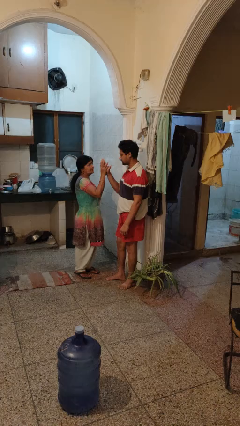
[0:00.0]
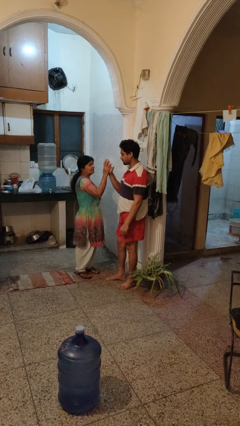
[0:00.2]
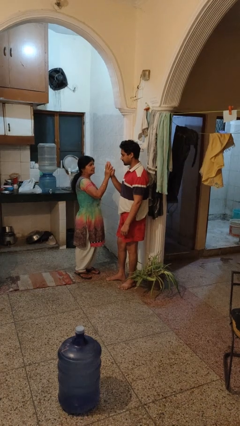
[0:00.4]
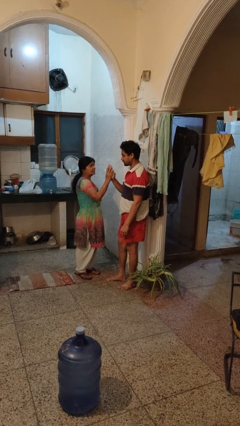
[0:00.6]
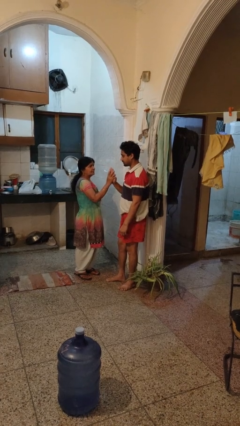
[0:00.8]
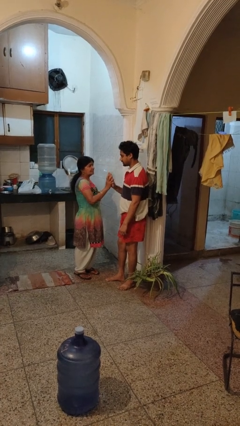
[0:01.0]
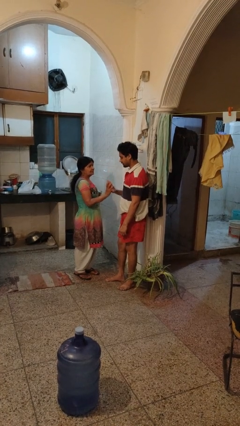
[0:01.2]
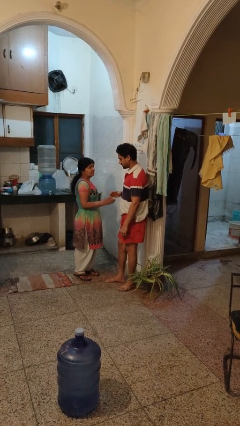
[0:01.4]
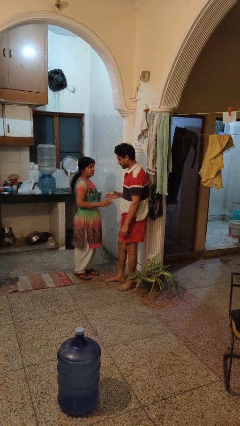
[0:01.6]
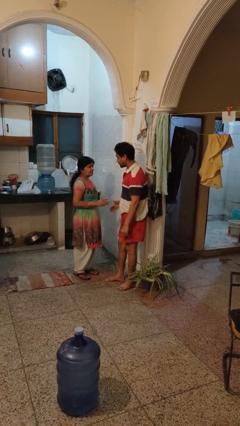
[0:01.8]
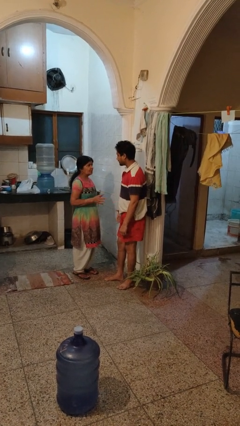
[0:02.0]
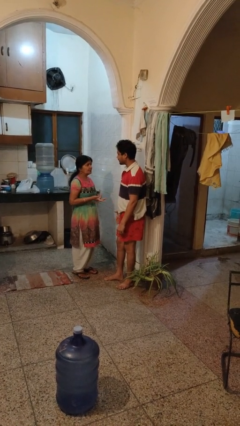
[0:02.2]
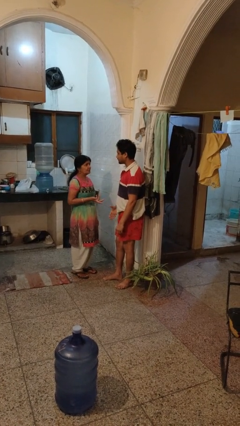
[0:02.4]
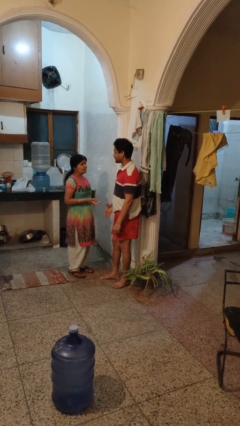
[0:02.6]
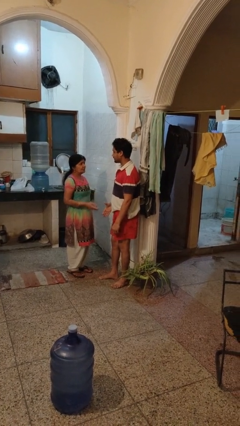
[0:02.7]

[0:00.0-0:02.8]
person highfives hand

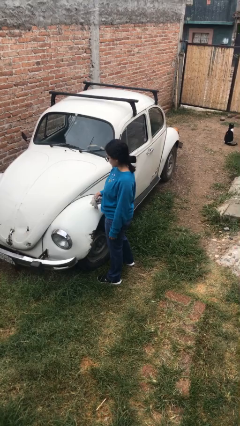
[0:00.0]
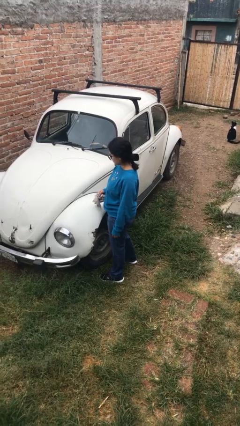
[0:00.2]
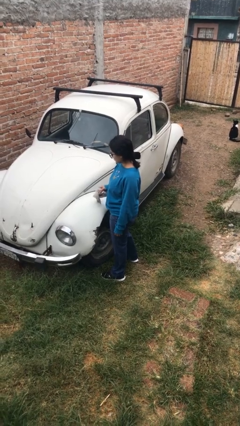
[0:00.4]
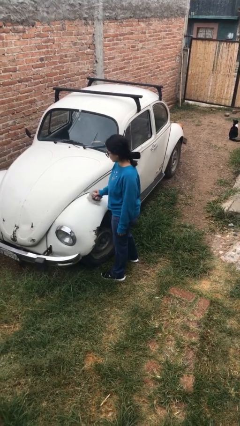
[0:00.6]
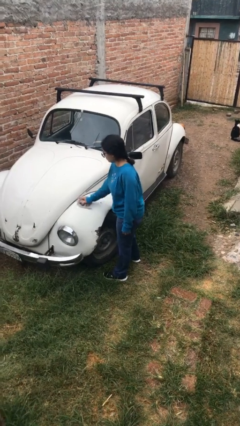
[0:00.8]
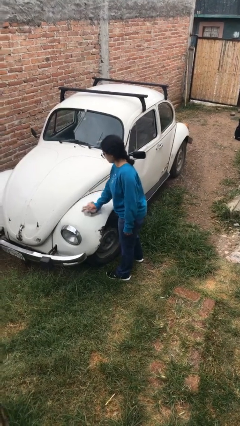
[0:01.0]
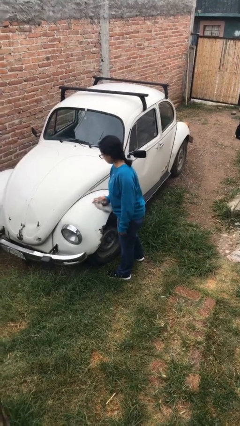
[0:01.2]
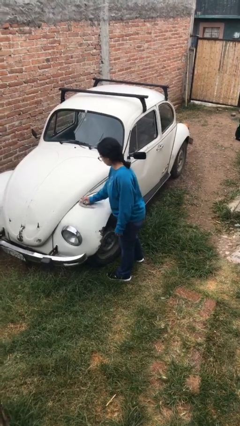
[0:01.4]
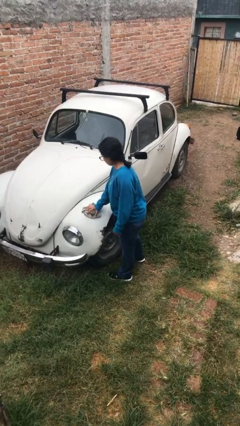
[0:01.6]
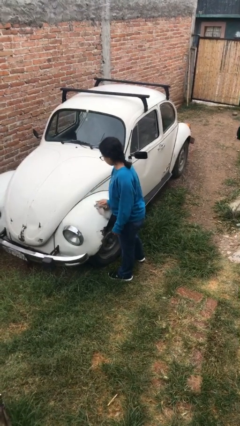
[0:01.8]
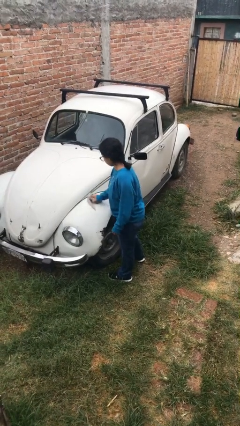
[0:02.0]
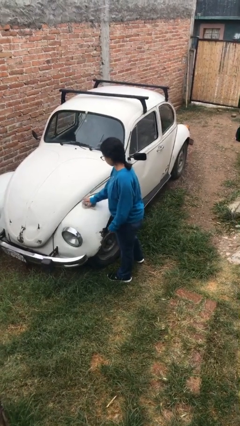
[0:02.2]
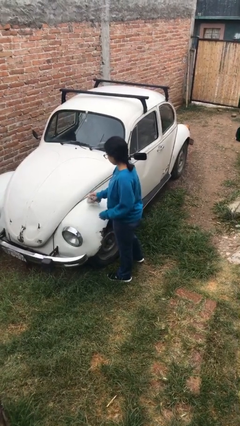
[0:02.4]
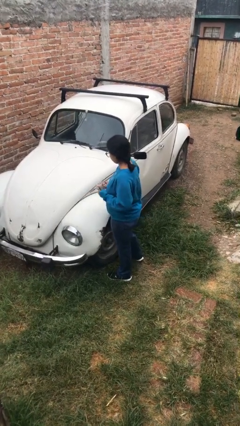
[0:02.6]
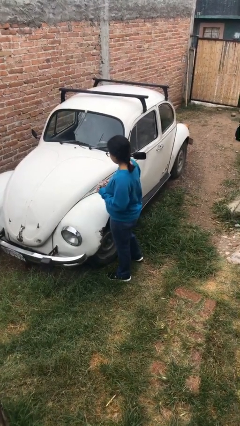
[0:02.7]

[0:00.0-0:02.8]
person polishes car with rag

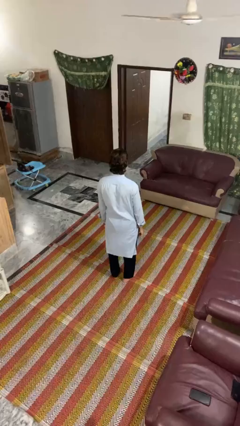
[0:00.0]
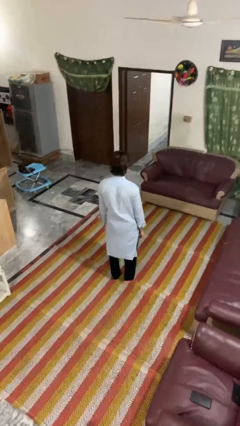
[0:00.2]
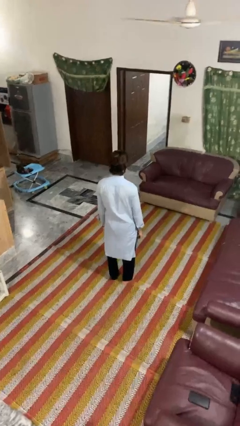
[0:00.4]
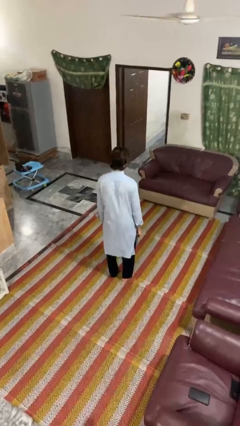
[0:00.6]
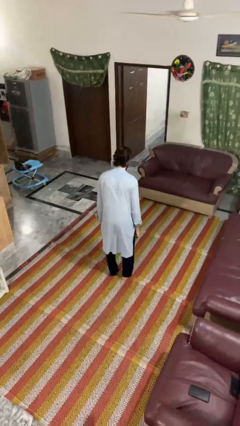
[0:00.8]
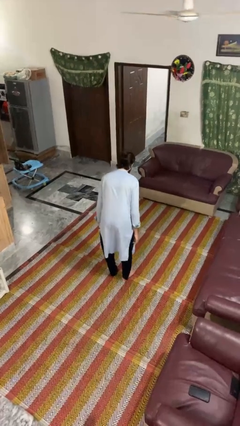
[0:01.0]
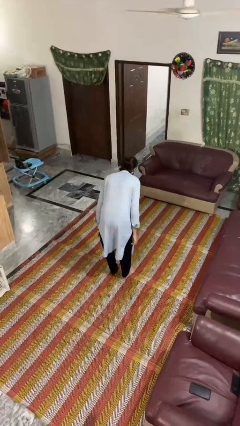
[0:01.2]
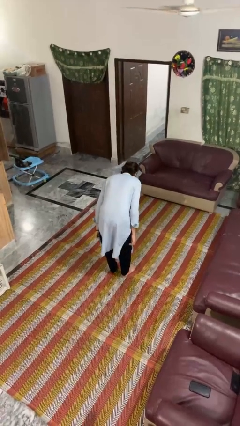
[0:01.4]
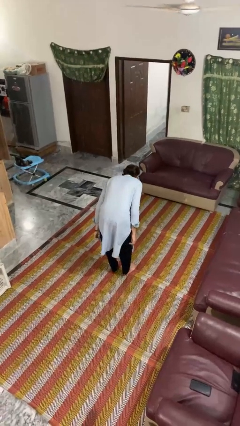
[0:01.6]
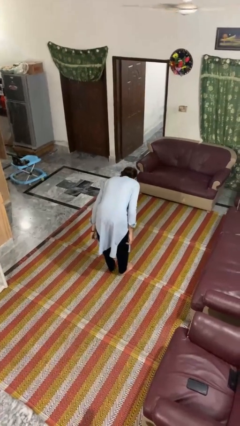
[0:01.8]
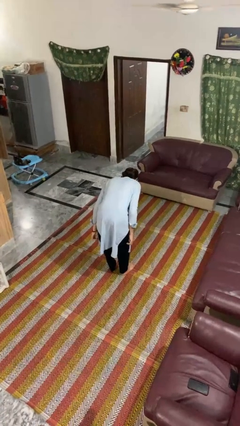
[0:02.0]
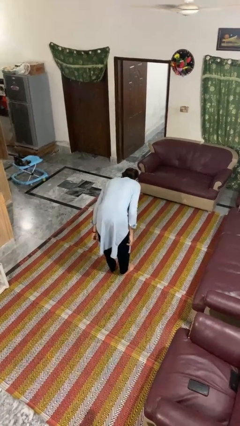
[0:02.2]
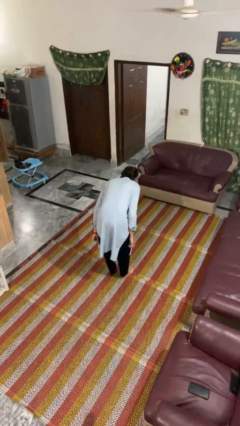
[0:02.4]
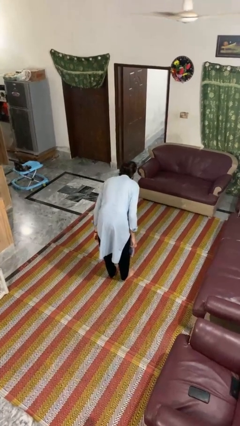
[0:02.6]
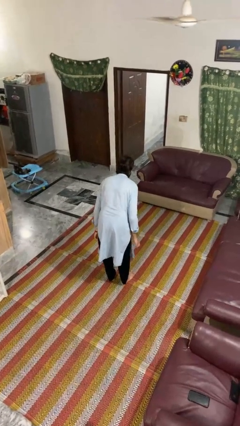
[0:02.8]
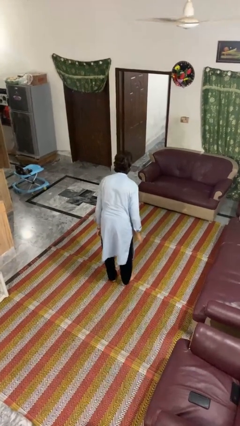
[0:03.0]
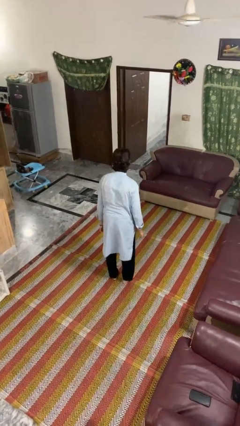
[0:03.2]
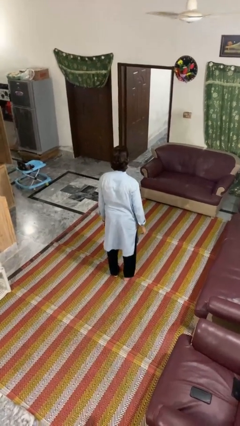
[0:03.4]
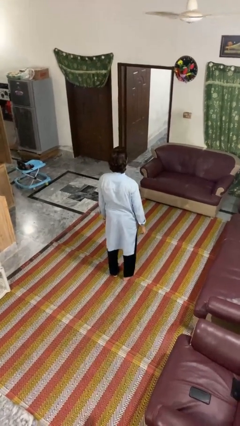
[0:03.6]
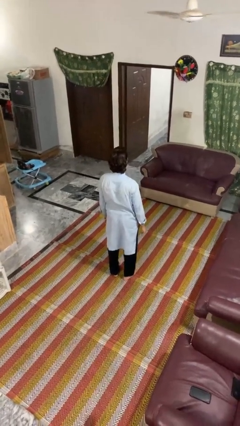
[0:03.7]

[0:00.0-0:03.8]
person bows

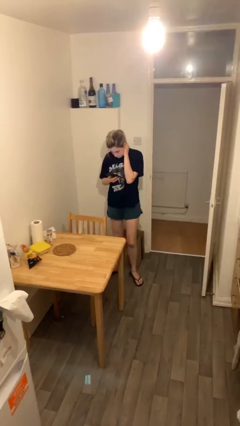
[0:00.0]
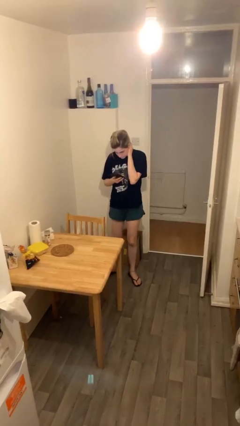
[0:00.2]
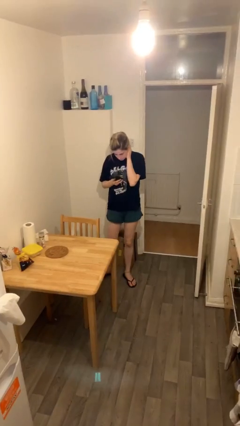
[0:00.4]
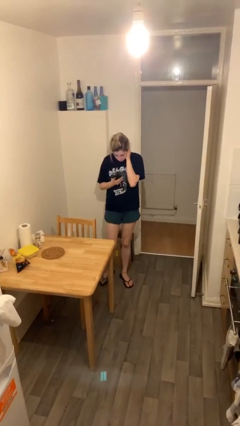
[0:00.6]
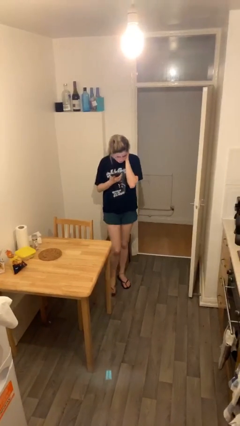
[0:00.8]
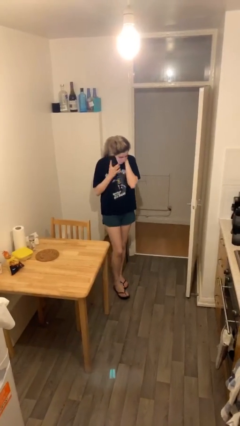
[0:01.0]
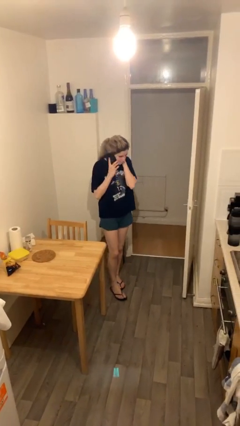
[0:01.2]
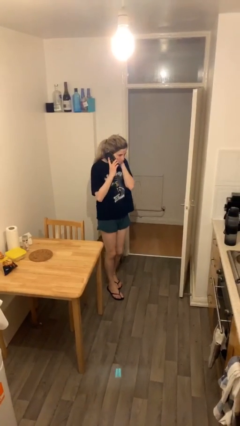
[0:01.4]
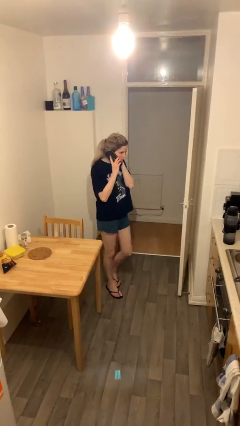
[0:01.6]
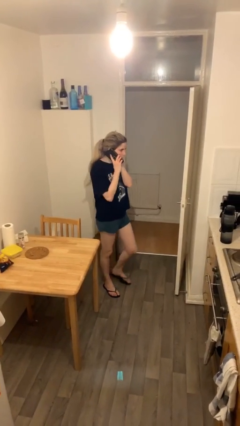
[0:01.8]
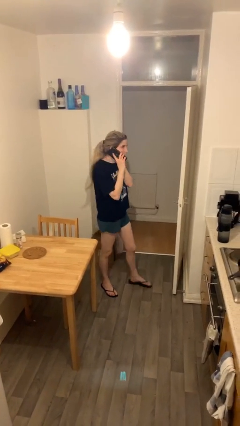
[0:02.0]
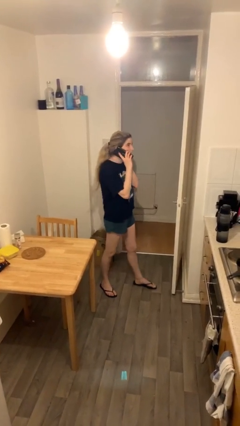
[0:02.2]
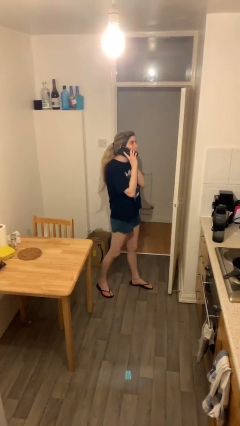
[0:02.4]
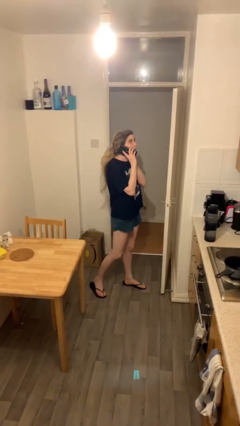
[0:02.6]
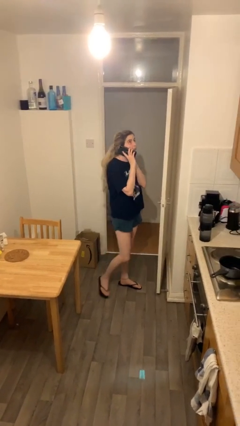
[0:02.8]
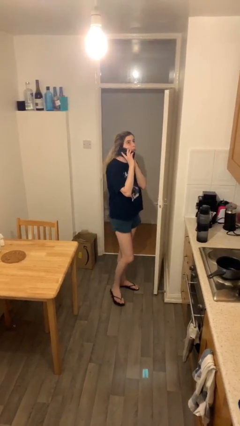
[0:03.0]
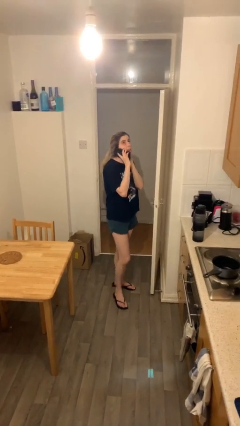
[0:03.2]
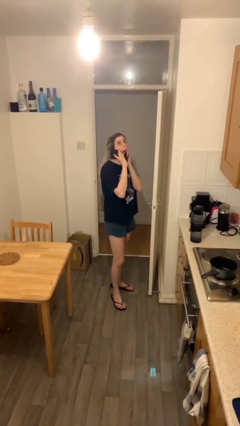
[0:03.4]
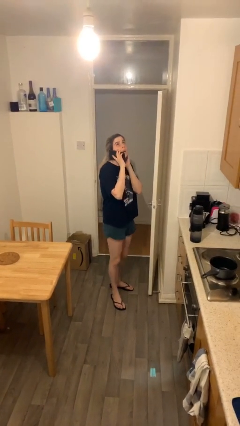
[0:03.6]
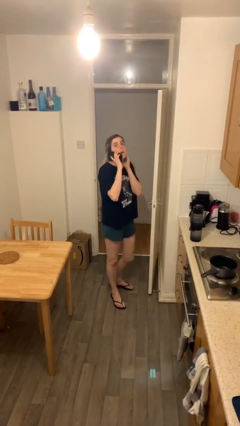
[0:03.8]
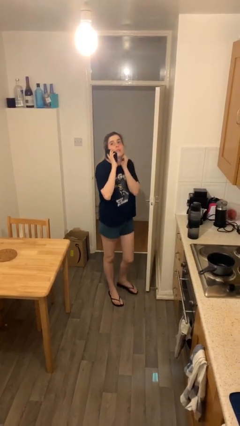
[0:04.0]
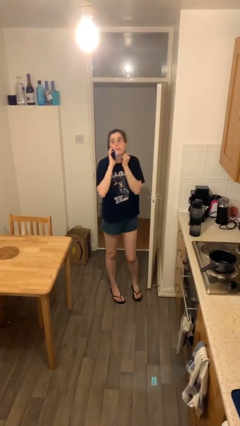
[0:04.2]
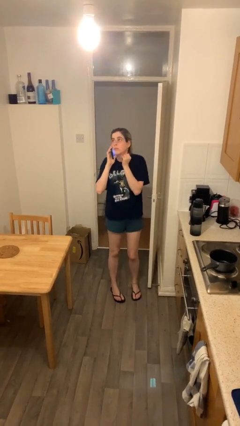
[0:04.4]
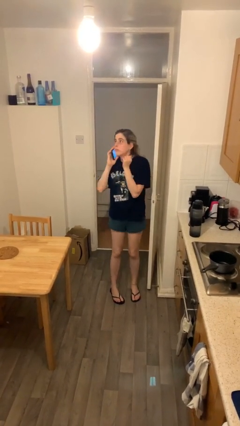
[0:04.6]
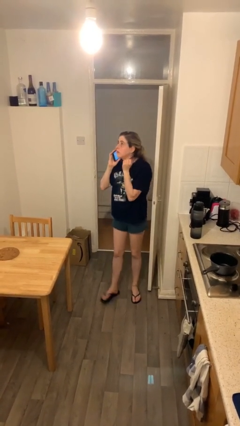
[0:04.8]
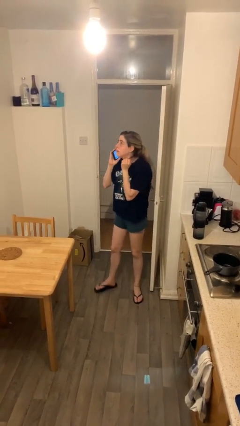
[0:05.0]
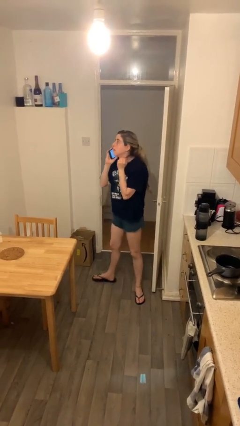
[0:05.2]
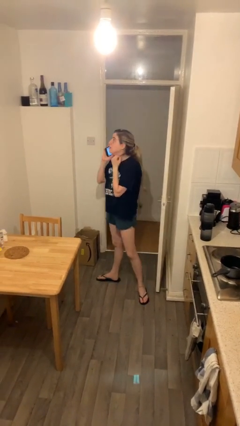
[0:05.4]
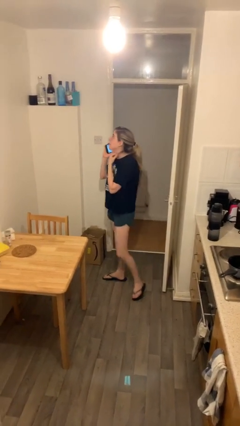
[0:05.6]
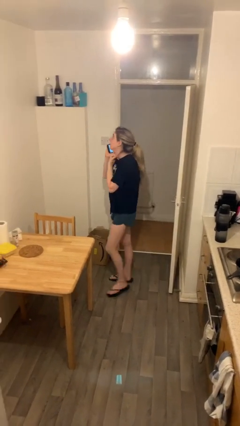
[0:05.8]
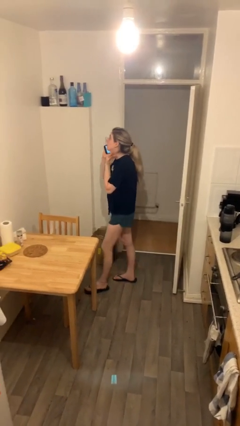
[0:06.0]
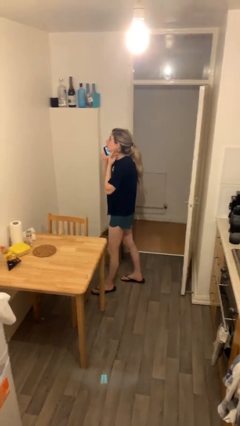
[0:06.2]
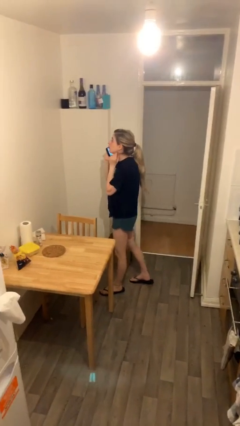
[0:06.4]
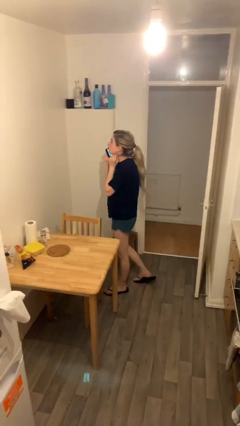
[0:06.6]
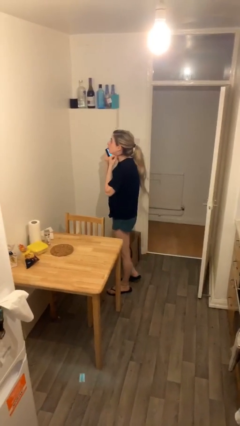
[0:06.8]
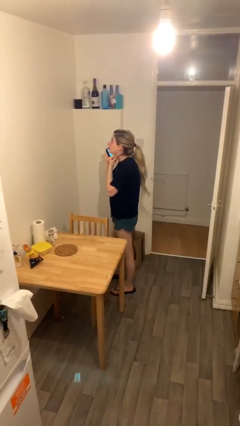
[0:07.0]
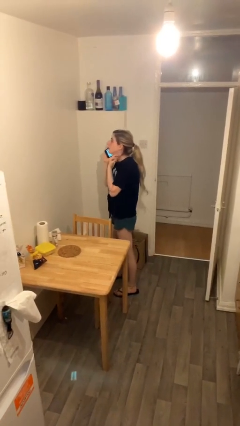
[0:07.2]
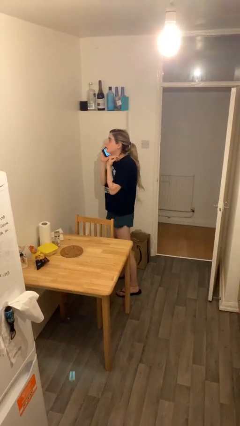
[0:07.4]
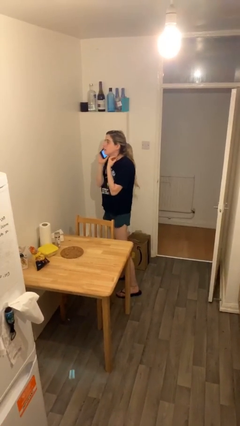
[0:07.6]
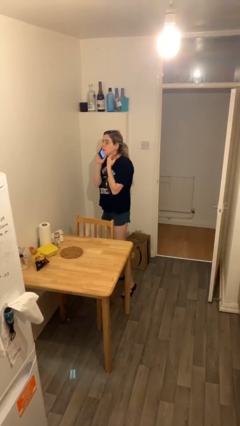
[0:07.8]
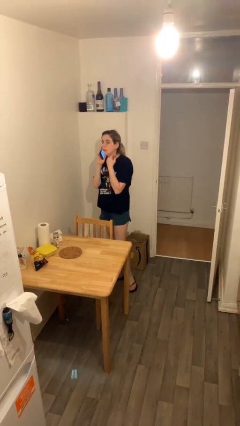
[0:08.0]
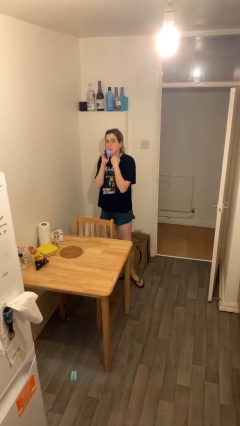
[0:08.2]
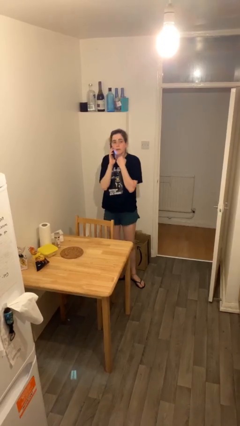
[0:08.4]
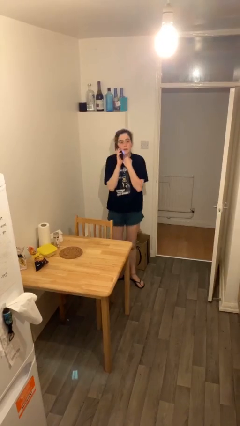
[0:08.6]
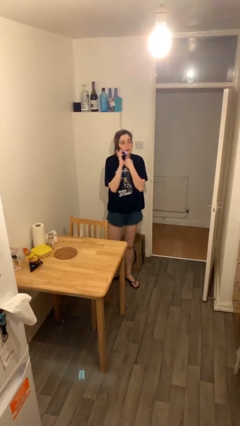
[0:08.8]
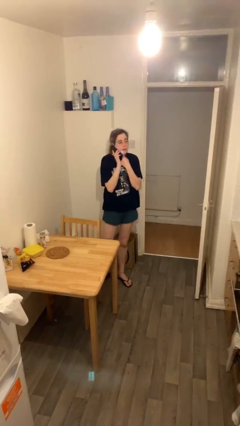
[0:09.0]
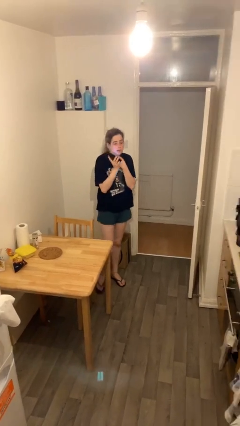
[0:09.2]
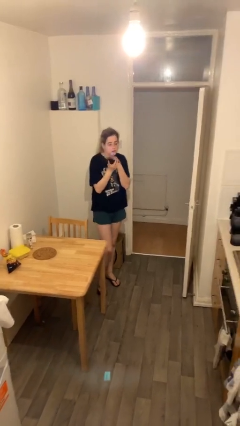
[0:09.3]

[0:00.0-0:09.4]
person talks on phone
